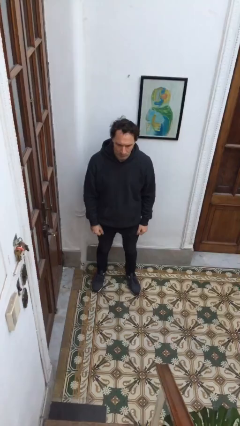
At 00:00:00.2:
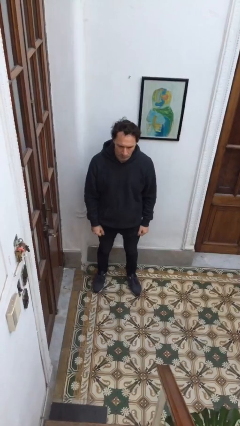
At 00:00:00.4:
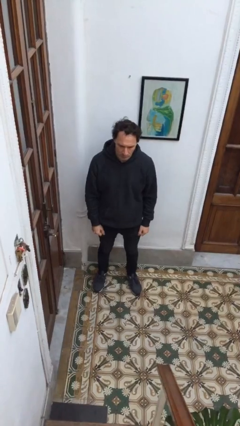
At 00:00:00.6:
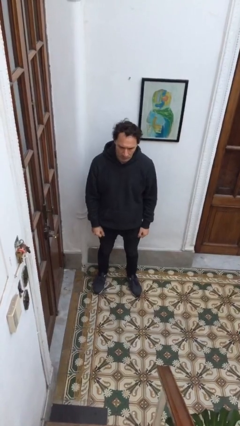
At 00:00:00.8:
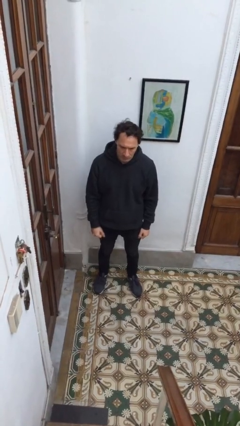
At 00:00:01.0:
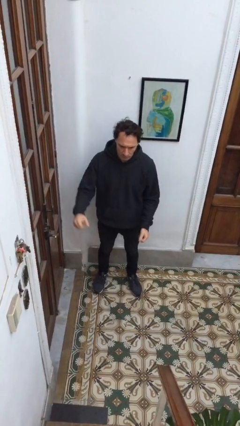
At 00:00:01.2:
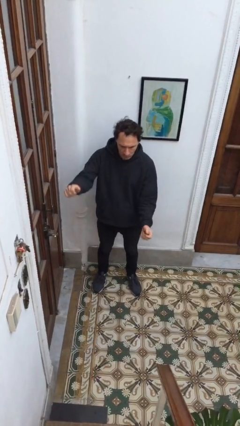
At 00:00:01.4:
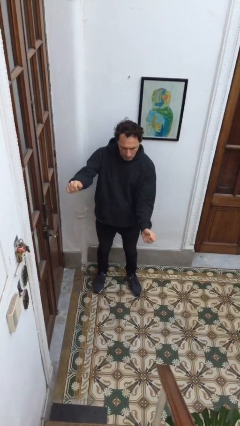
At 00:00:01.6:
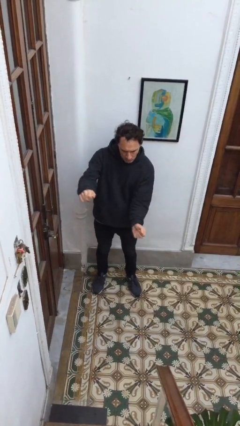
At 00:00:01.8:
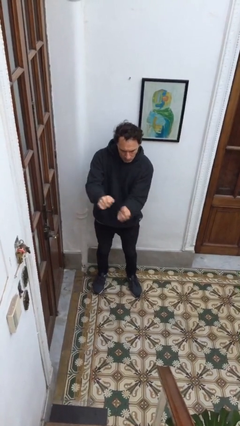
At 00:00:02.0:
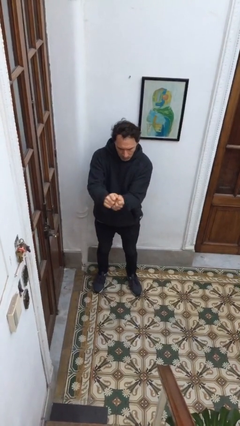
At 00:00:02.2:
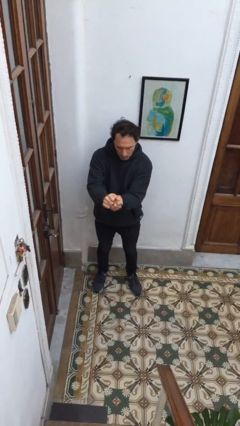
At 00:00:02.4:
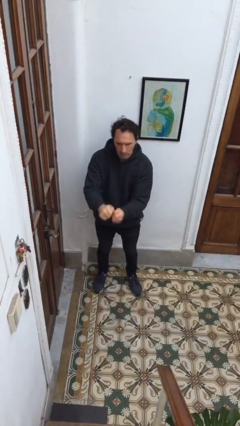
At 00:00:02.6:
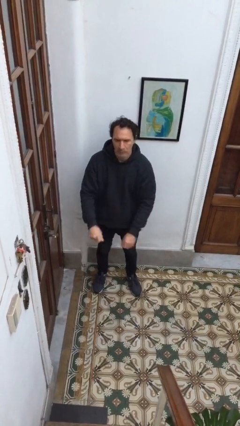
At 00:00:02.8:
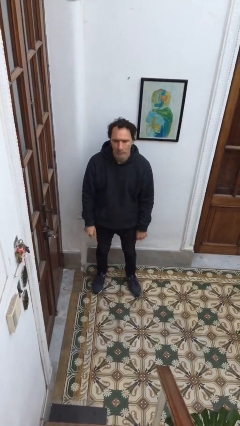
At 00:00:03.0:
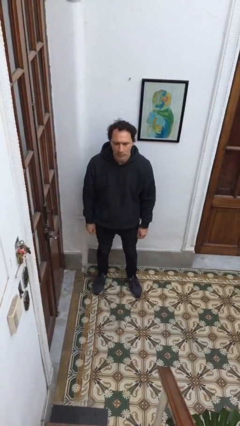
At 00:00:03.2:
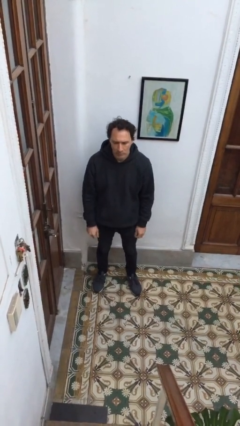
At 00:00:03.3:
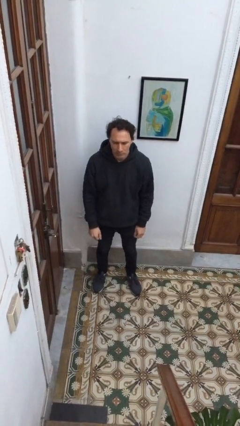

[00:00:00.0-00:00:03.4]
person gestures zoom out

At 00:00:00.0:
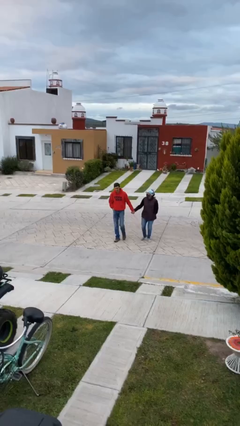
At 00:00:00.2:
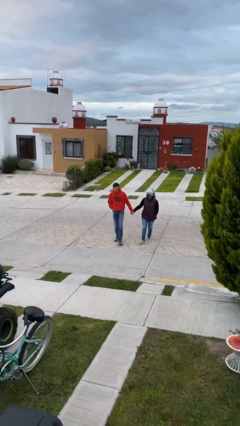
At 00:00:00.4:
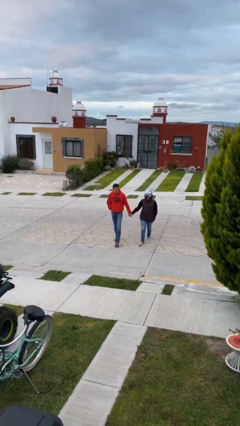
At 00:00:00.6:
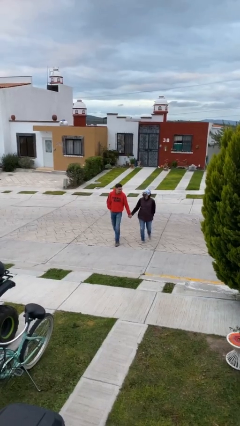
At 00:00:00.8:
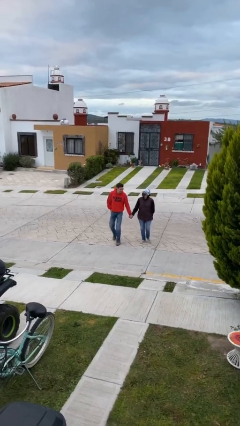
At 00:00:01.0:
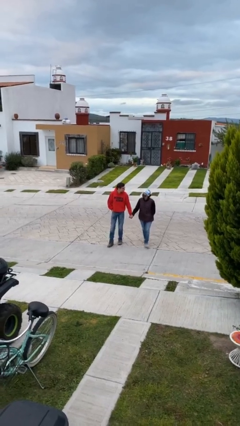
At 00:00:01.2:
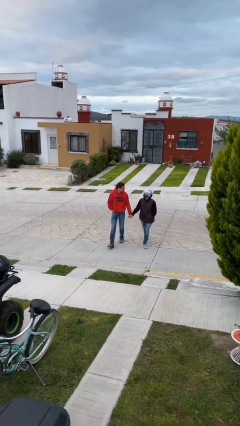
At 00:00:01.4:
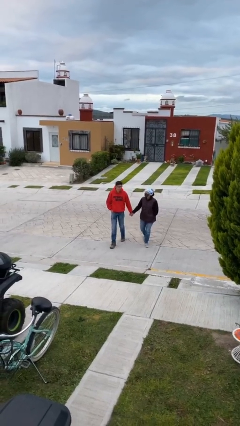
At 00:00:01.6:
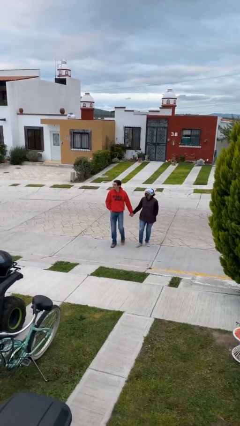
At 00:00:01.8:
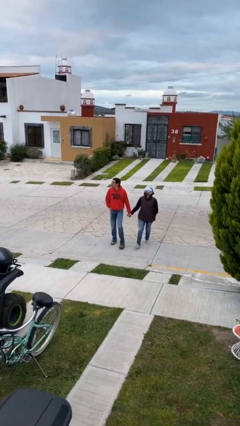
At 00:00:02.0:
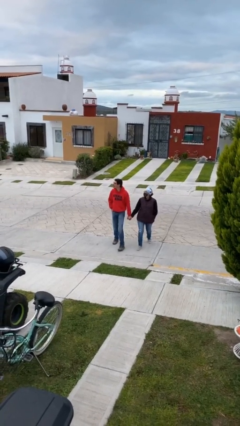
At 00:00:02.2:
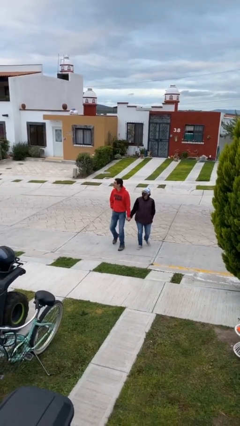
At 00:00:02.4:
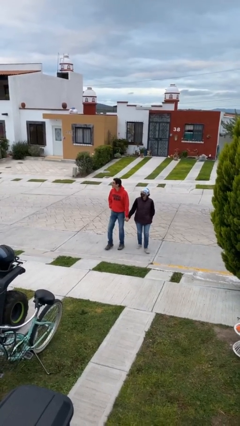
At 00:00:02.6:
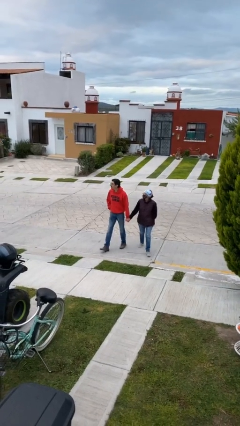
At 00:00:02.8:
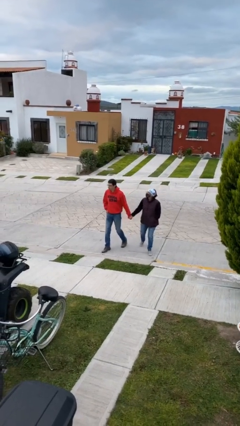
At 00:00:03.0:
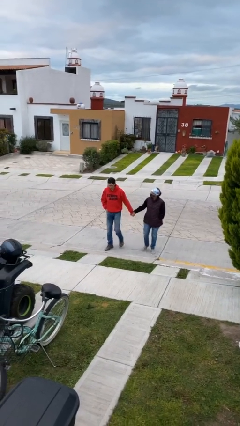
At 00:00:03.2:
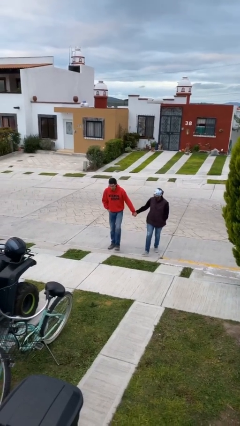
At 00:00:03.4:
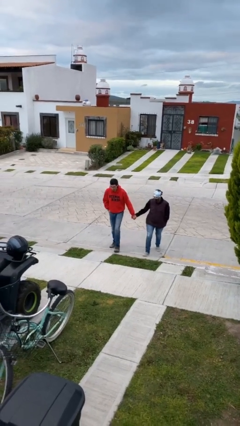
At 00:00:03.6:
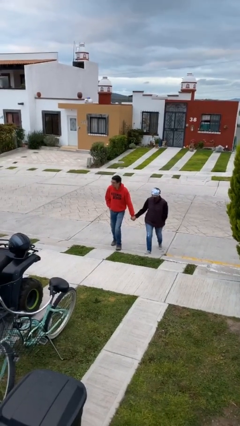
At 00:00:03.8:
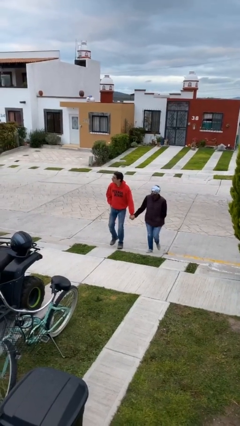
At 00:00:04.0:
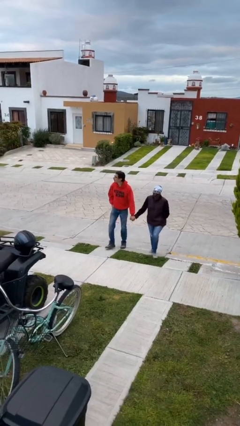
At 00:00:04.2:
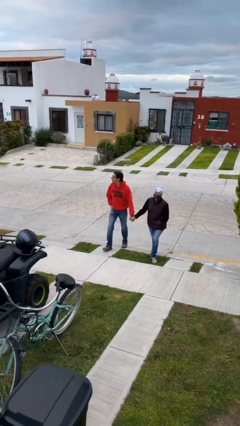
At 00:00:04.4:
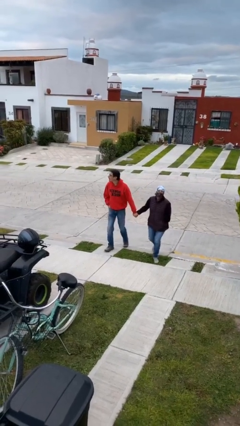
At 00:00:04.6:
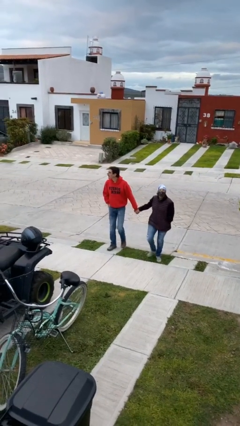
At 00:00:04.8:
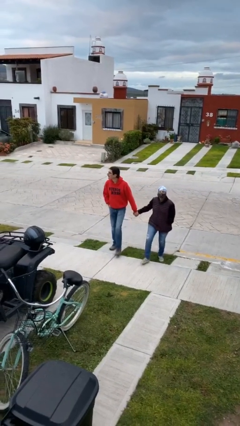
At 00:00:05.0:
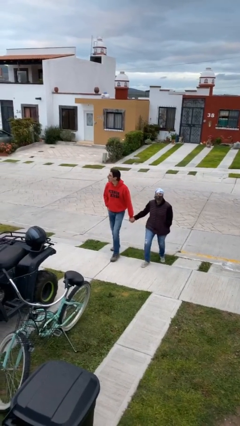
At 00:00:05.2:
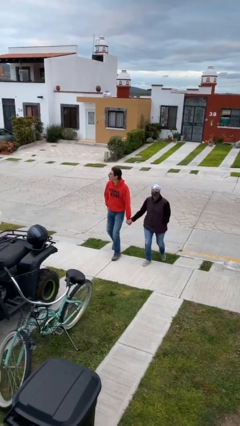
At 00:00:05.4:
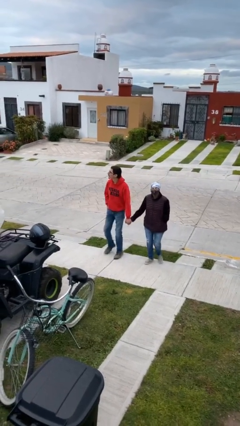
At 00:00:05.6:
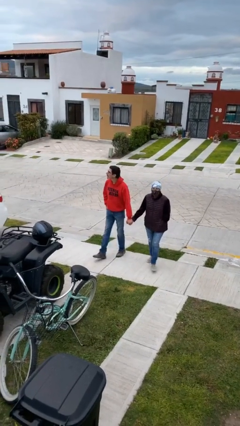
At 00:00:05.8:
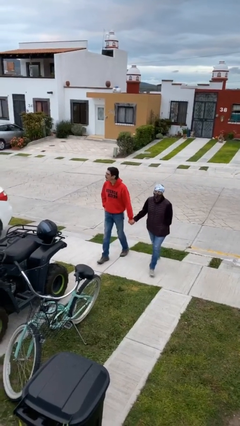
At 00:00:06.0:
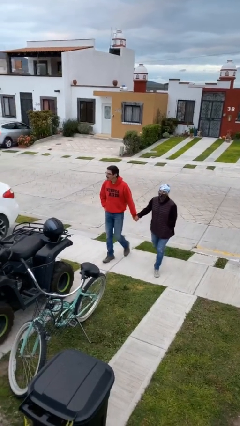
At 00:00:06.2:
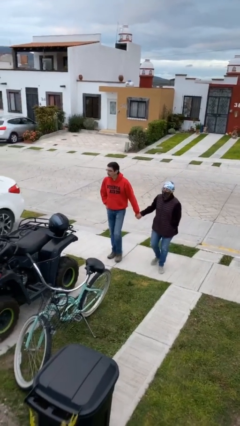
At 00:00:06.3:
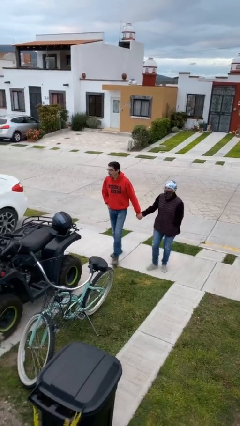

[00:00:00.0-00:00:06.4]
person holds hand

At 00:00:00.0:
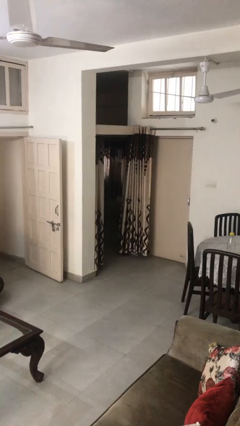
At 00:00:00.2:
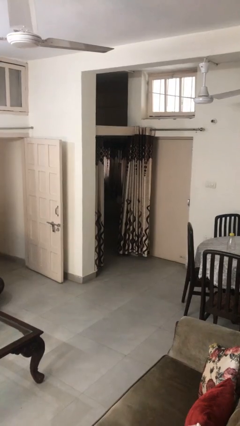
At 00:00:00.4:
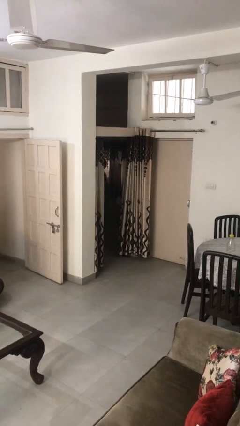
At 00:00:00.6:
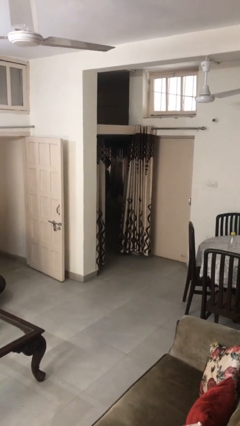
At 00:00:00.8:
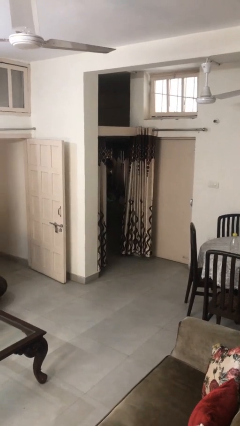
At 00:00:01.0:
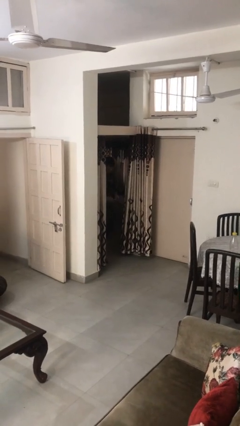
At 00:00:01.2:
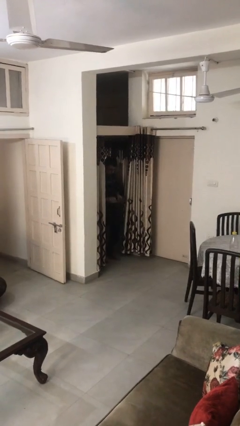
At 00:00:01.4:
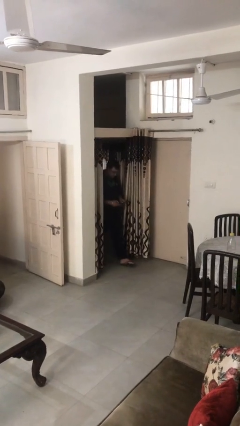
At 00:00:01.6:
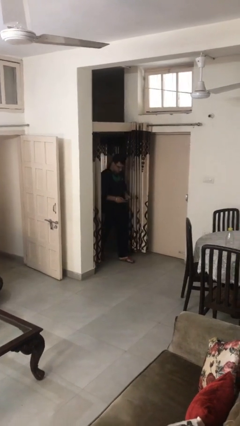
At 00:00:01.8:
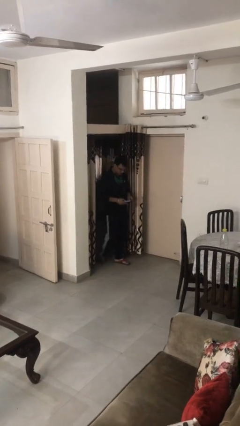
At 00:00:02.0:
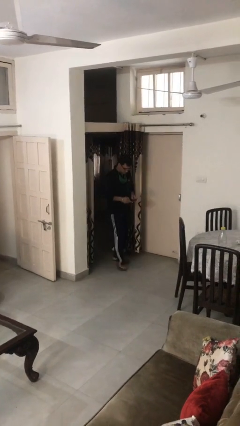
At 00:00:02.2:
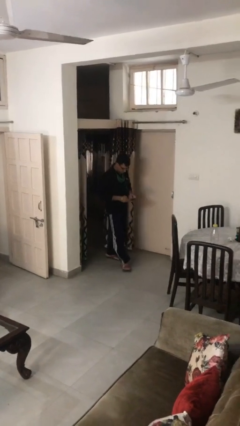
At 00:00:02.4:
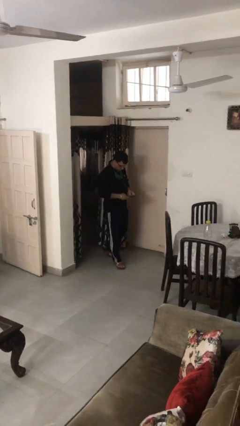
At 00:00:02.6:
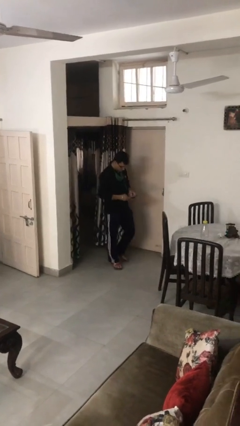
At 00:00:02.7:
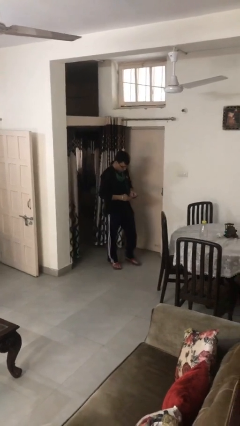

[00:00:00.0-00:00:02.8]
person enters scene through structure

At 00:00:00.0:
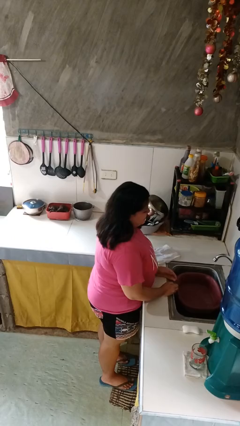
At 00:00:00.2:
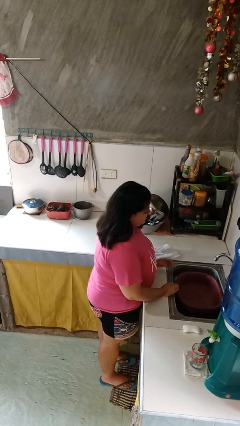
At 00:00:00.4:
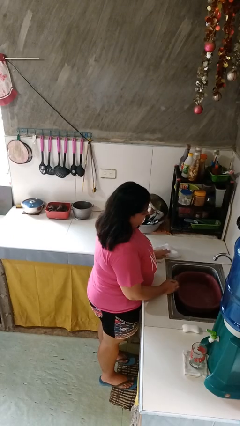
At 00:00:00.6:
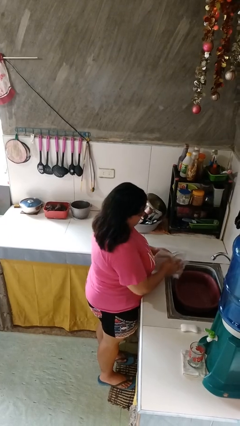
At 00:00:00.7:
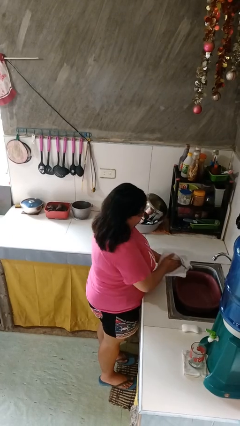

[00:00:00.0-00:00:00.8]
person dries hands with towel

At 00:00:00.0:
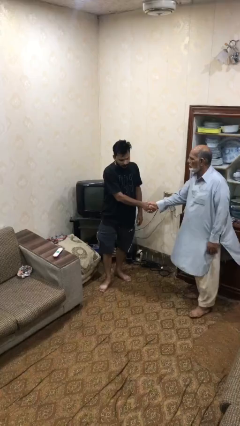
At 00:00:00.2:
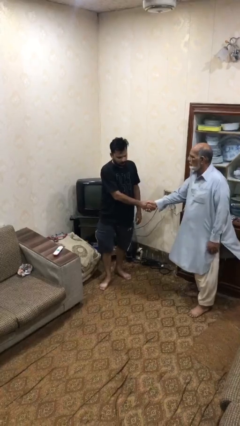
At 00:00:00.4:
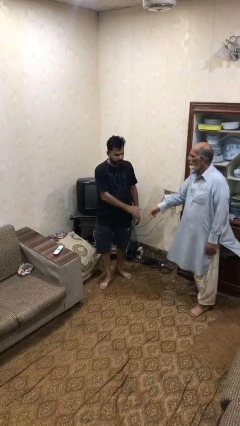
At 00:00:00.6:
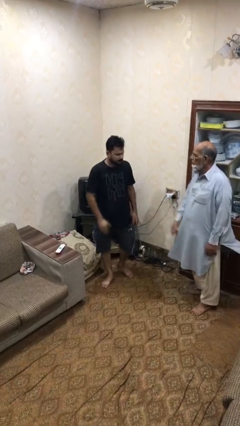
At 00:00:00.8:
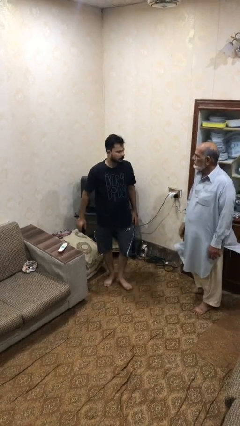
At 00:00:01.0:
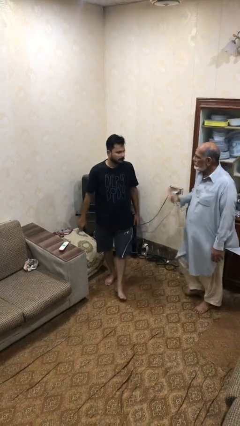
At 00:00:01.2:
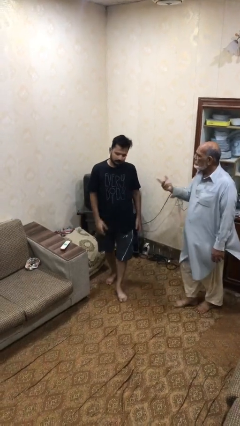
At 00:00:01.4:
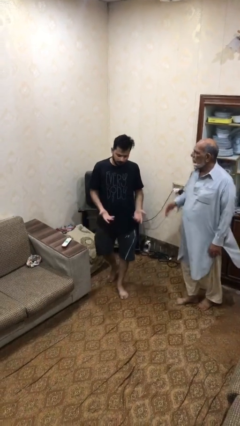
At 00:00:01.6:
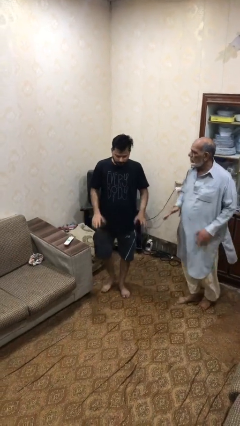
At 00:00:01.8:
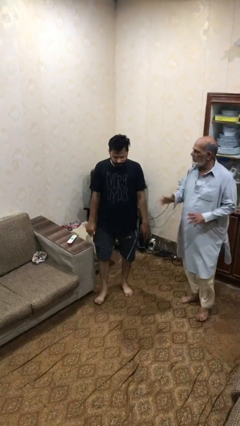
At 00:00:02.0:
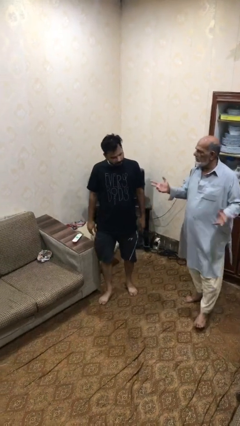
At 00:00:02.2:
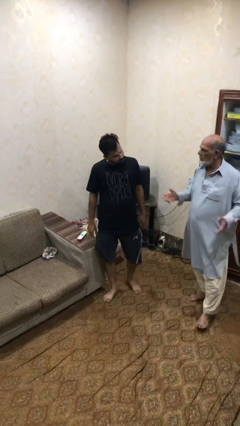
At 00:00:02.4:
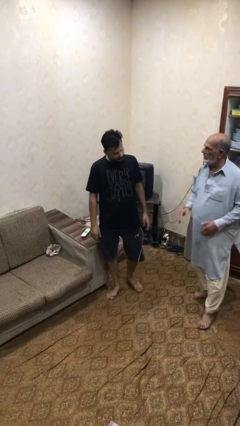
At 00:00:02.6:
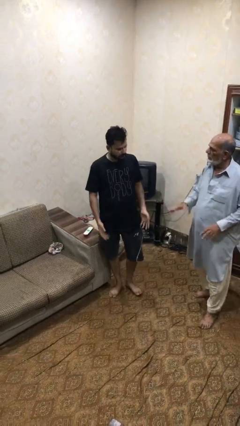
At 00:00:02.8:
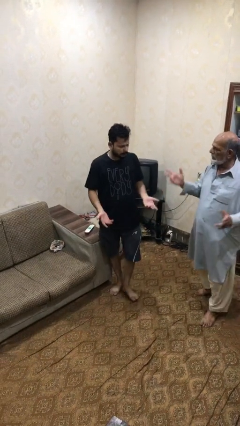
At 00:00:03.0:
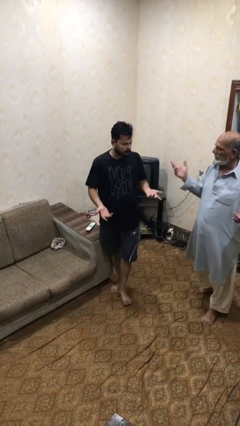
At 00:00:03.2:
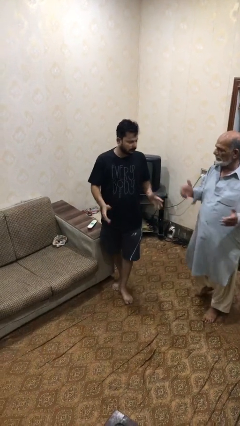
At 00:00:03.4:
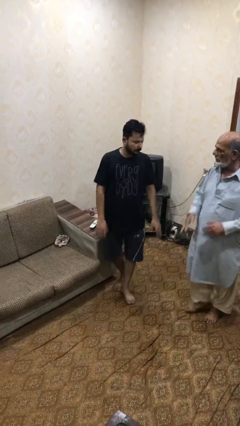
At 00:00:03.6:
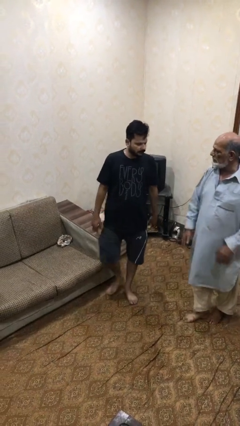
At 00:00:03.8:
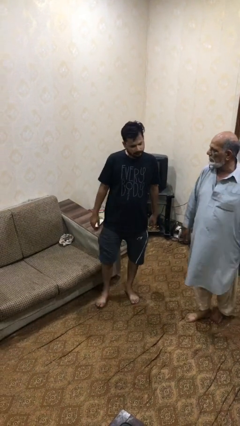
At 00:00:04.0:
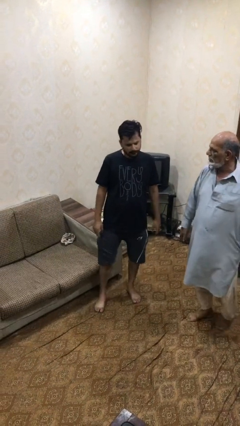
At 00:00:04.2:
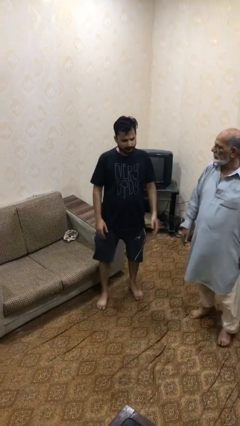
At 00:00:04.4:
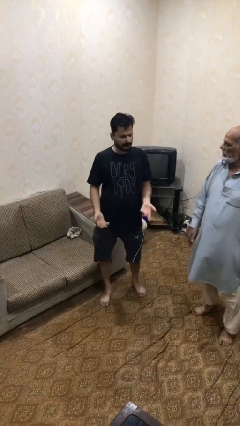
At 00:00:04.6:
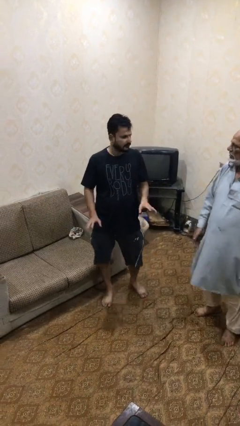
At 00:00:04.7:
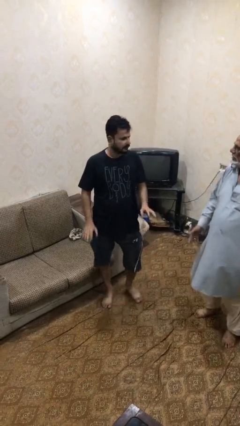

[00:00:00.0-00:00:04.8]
person talks to person
